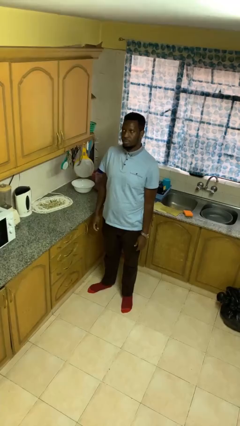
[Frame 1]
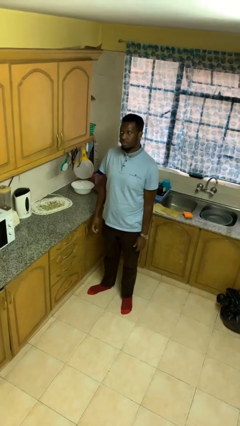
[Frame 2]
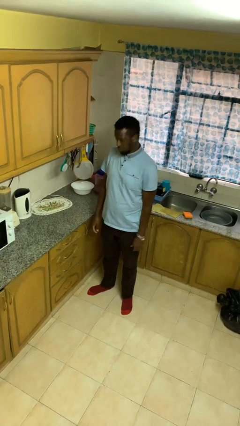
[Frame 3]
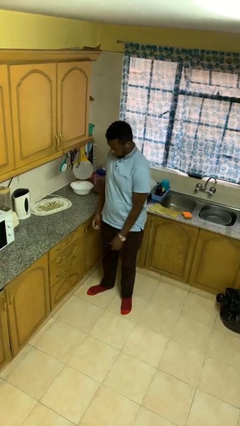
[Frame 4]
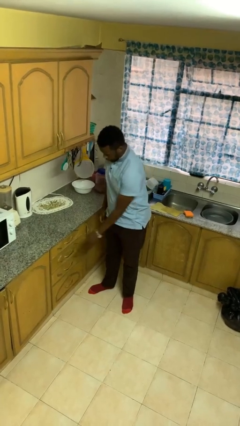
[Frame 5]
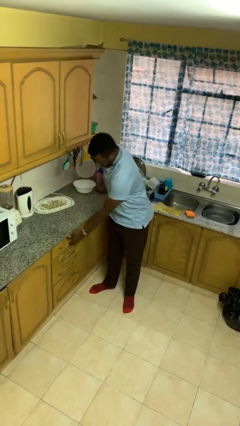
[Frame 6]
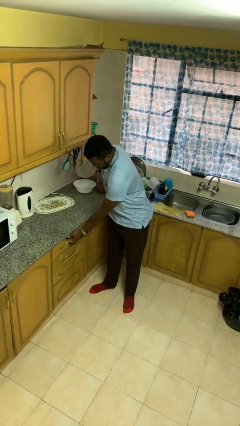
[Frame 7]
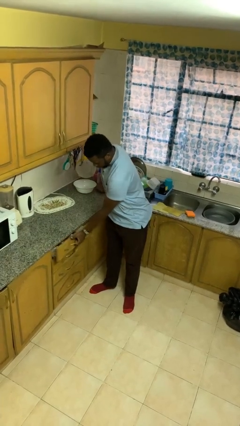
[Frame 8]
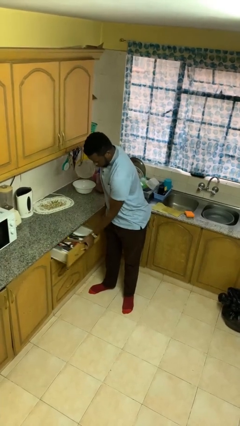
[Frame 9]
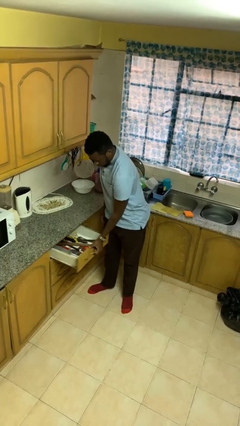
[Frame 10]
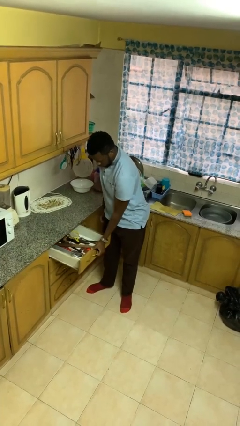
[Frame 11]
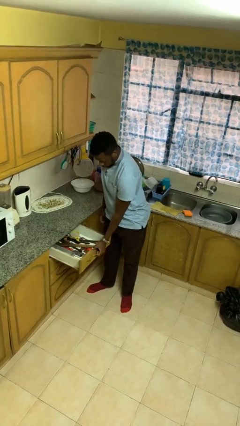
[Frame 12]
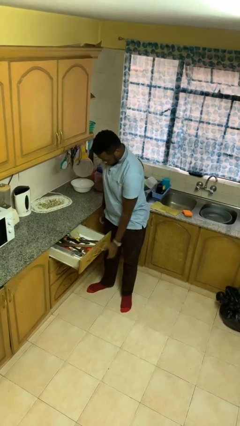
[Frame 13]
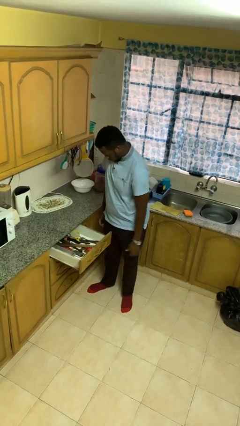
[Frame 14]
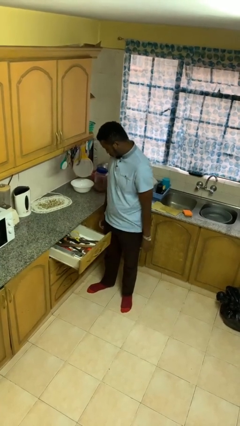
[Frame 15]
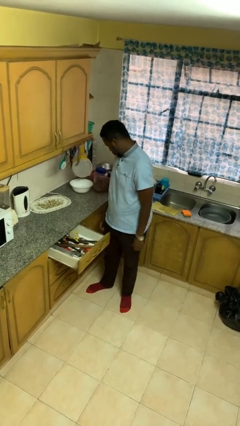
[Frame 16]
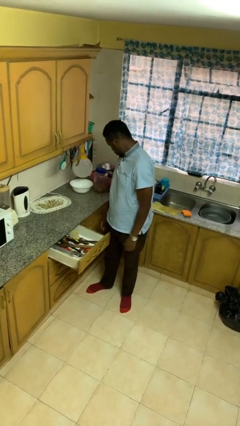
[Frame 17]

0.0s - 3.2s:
person opens kitchen drawer

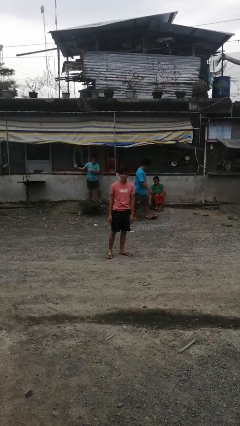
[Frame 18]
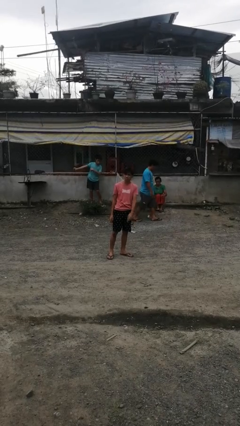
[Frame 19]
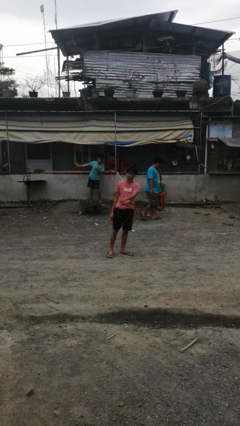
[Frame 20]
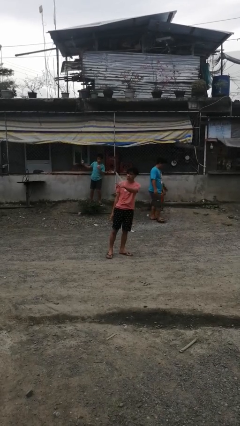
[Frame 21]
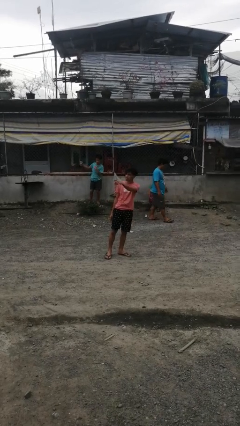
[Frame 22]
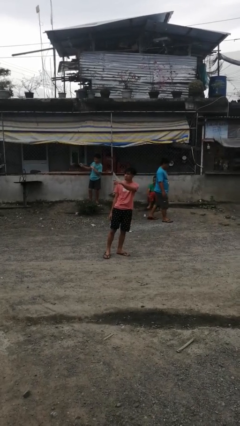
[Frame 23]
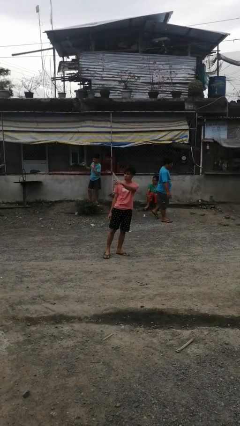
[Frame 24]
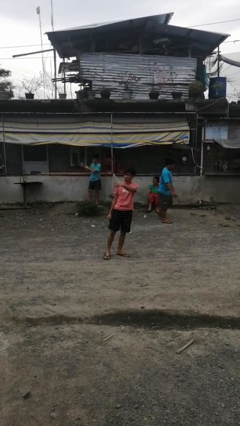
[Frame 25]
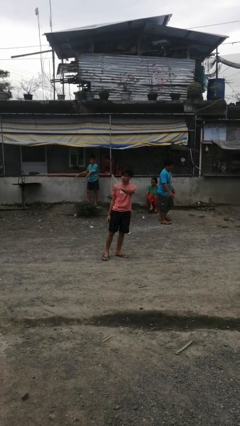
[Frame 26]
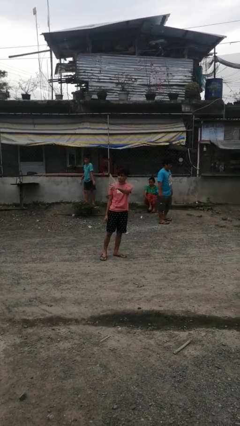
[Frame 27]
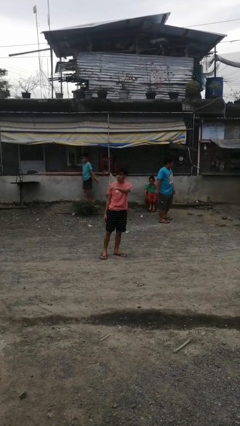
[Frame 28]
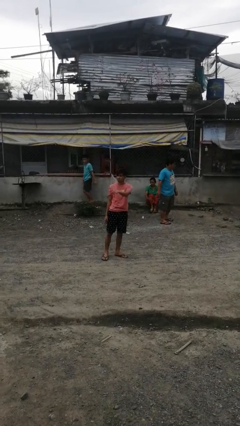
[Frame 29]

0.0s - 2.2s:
person points at person

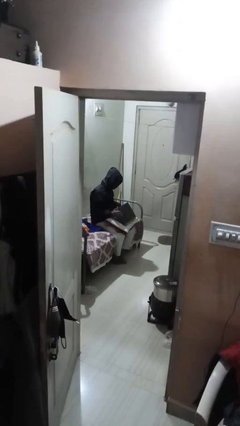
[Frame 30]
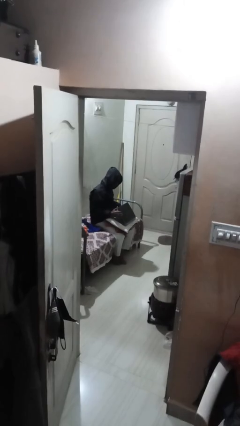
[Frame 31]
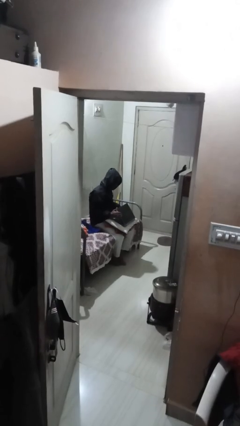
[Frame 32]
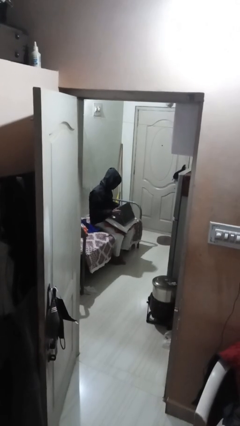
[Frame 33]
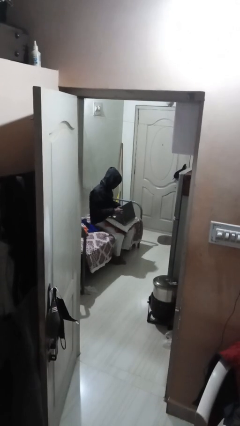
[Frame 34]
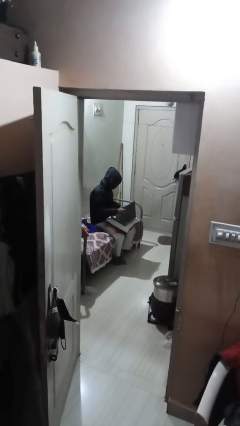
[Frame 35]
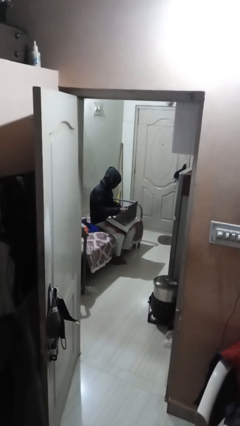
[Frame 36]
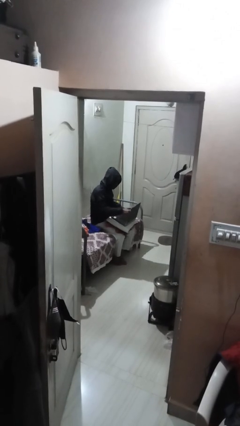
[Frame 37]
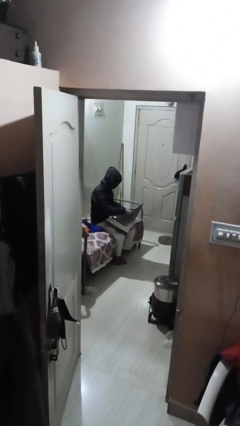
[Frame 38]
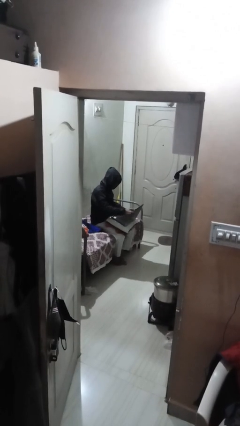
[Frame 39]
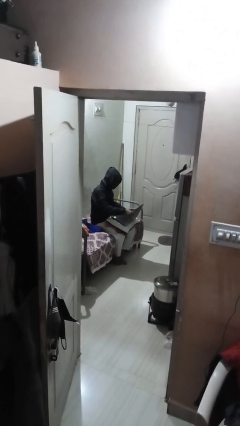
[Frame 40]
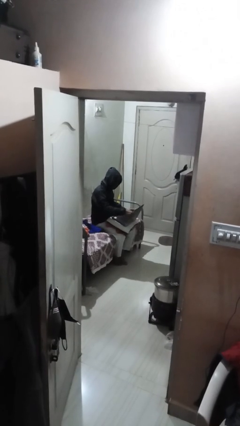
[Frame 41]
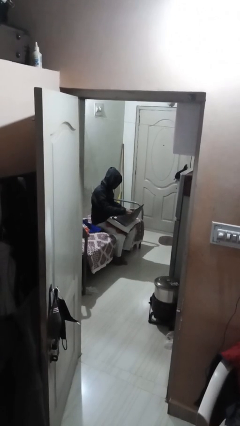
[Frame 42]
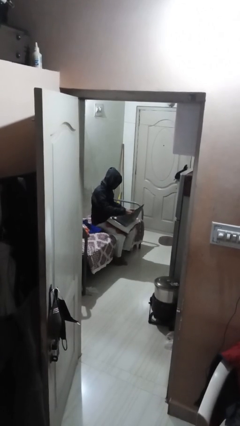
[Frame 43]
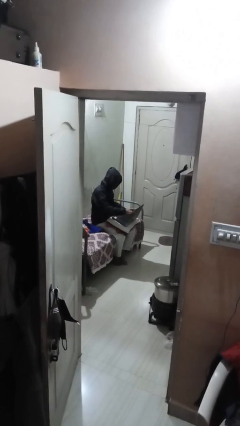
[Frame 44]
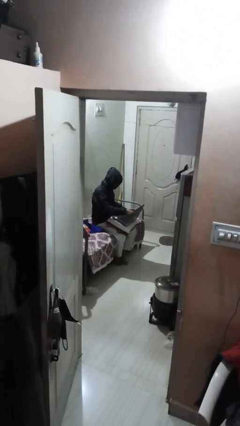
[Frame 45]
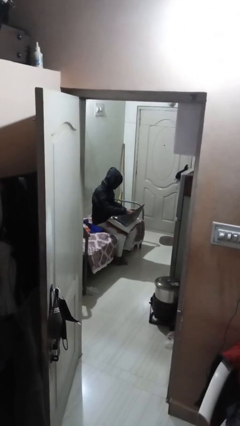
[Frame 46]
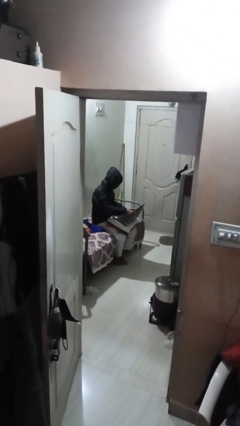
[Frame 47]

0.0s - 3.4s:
person interacts with laptop

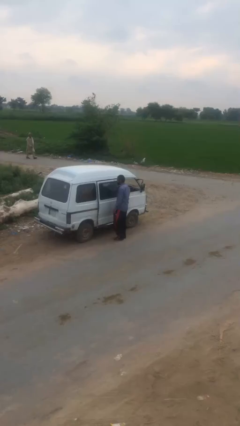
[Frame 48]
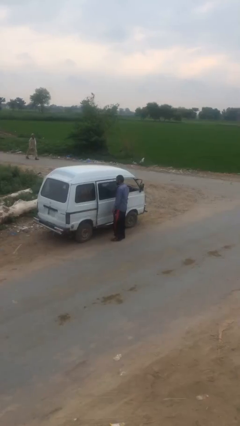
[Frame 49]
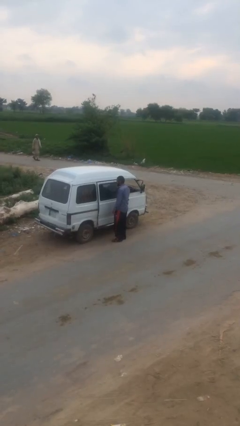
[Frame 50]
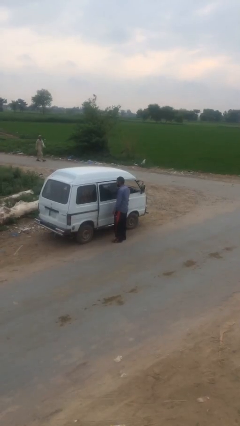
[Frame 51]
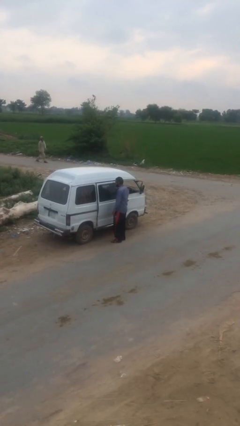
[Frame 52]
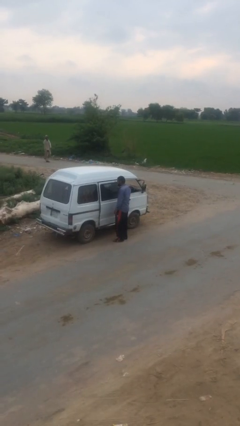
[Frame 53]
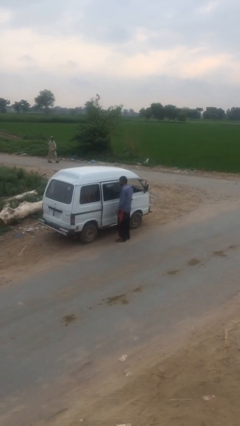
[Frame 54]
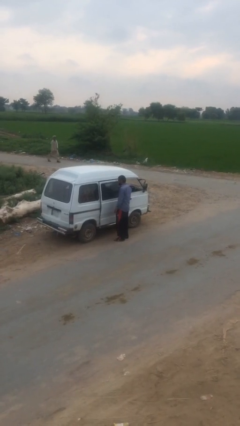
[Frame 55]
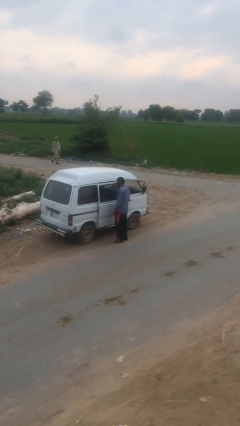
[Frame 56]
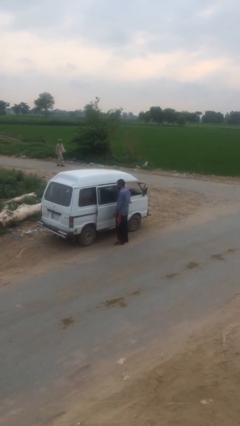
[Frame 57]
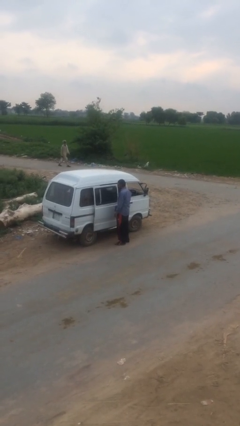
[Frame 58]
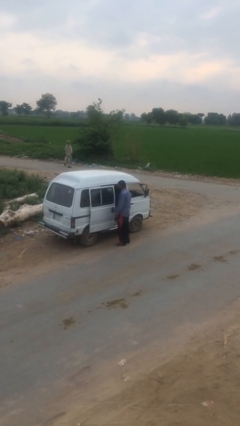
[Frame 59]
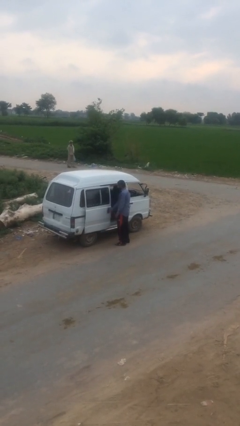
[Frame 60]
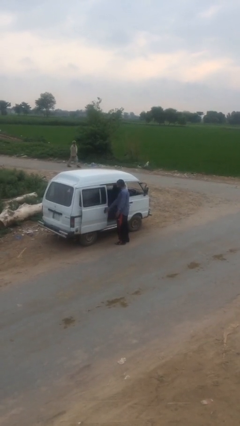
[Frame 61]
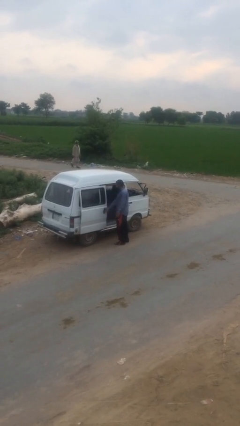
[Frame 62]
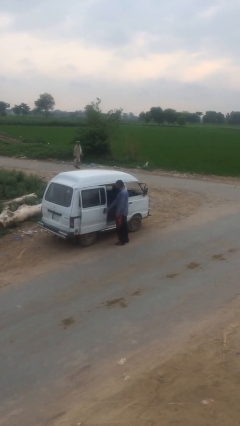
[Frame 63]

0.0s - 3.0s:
person opens car door

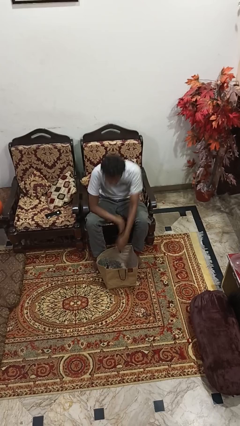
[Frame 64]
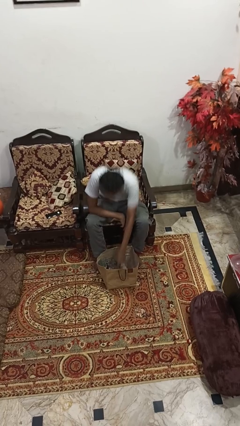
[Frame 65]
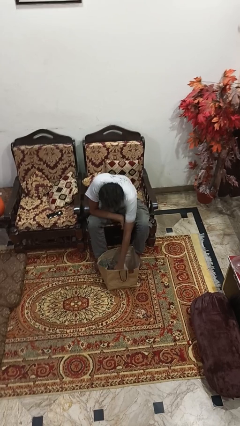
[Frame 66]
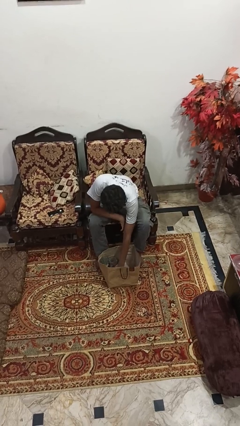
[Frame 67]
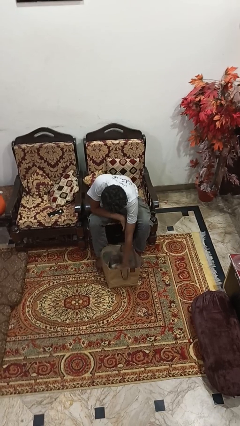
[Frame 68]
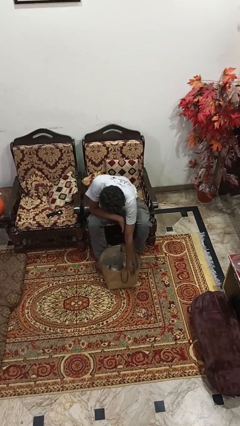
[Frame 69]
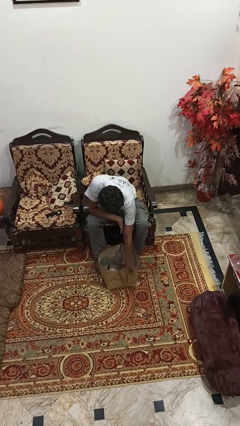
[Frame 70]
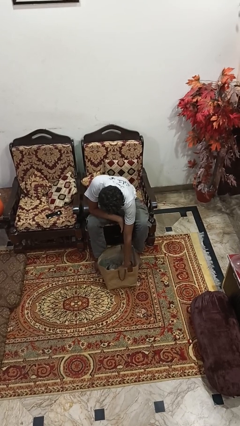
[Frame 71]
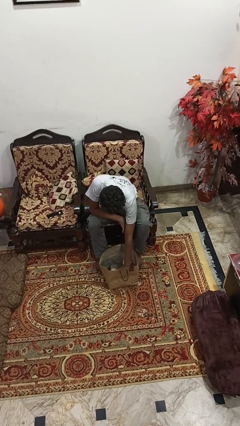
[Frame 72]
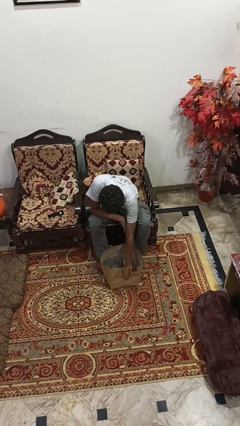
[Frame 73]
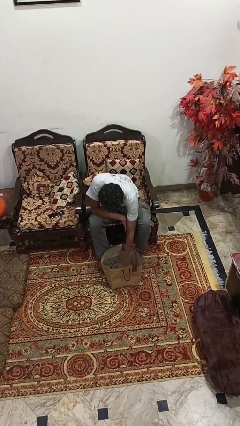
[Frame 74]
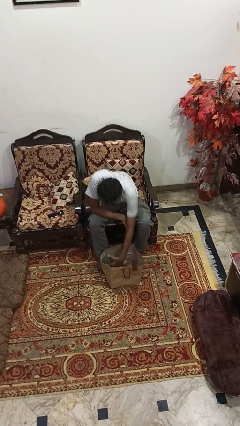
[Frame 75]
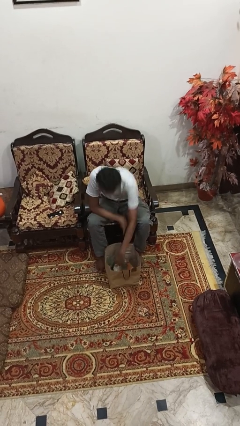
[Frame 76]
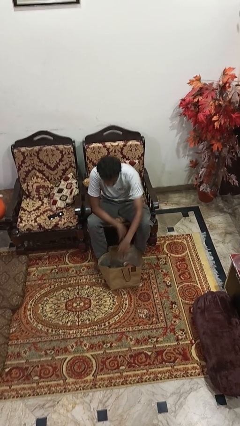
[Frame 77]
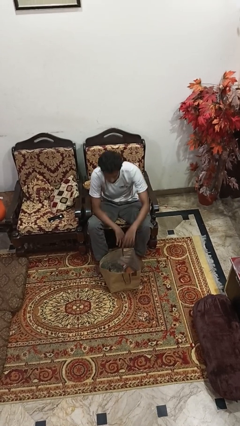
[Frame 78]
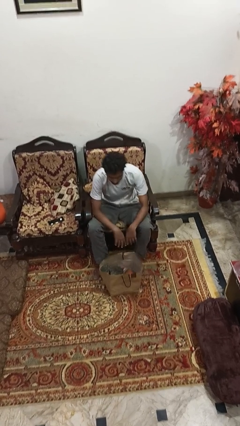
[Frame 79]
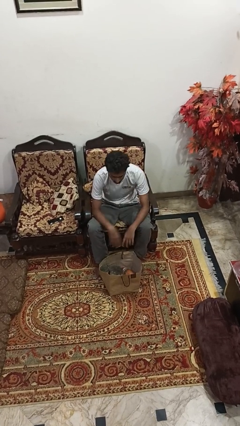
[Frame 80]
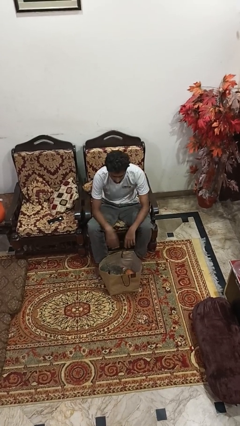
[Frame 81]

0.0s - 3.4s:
person searches in bag

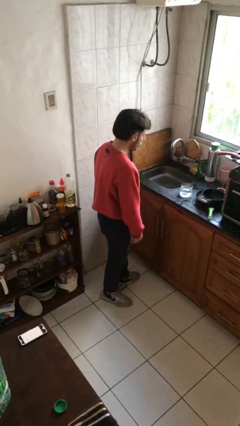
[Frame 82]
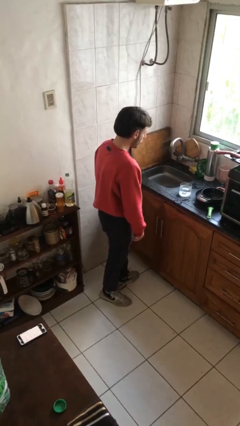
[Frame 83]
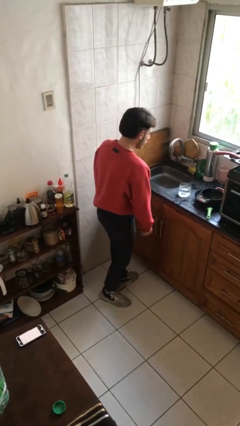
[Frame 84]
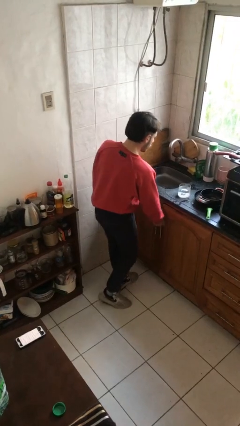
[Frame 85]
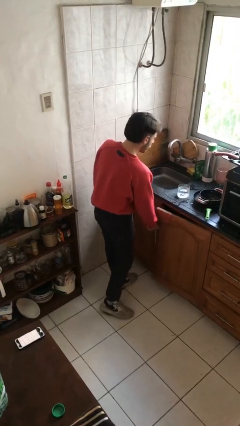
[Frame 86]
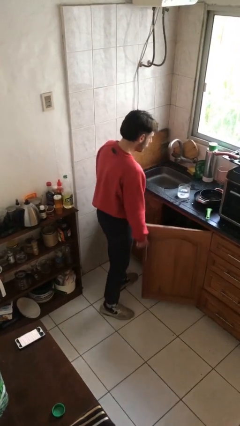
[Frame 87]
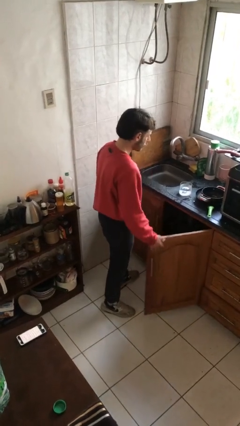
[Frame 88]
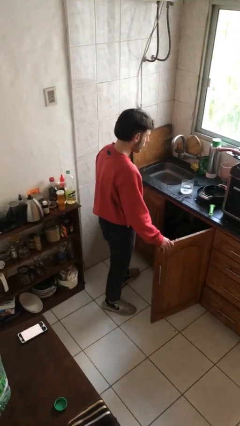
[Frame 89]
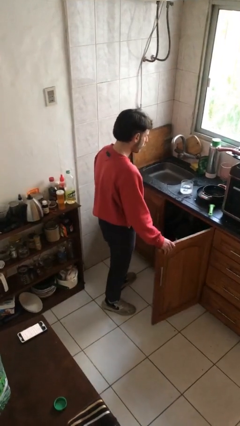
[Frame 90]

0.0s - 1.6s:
person opens cabinet

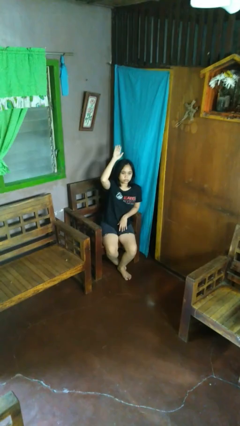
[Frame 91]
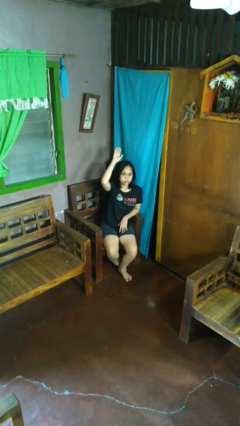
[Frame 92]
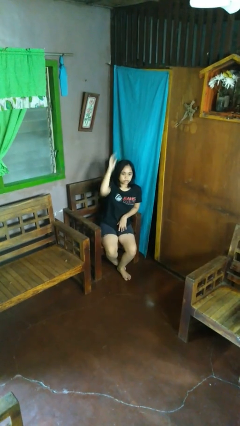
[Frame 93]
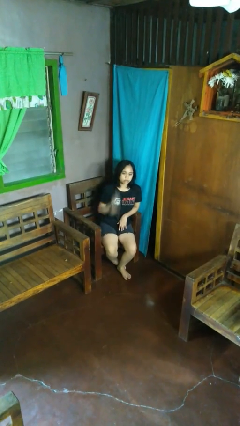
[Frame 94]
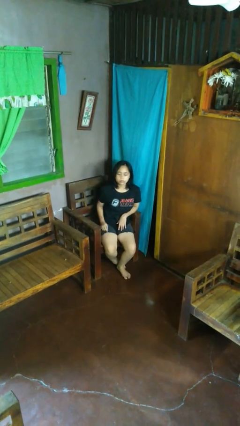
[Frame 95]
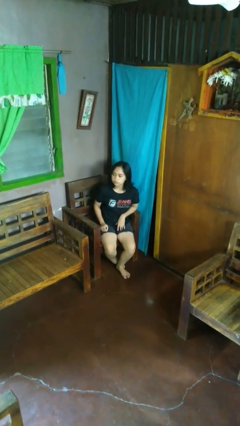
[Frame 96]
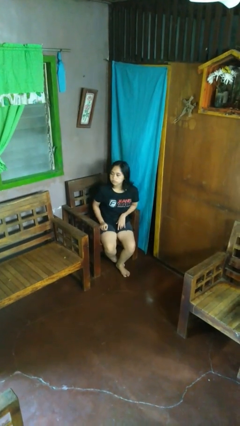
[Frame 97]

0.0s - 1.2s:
person gestures lower hand
